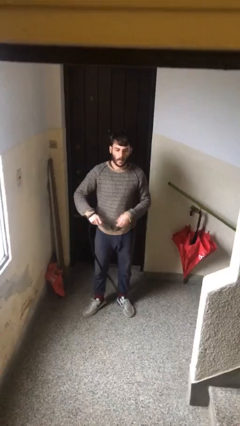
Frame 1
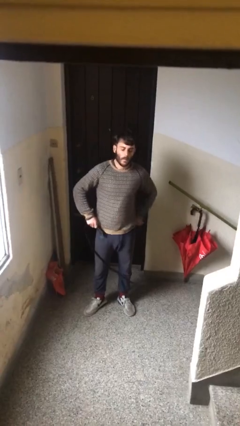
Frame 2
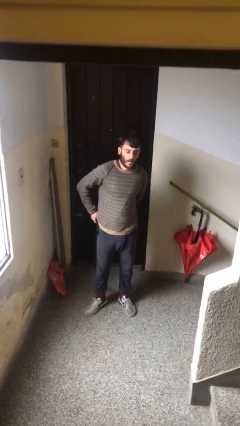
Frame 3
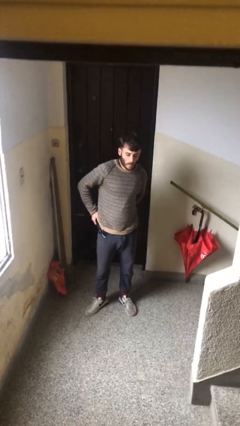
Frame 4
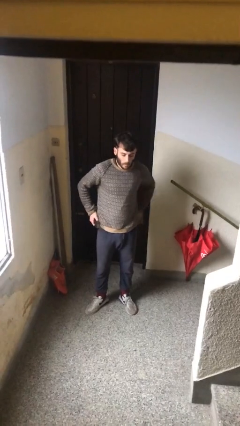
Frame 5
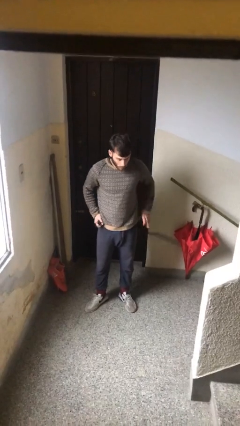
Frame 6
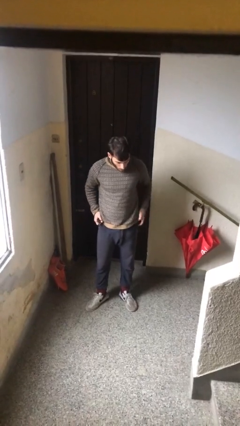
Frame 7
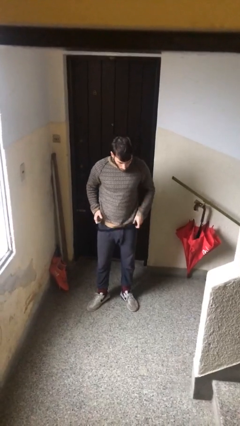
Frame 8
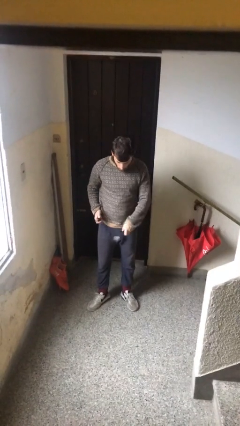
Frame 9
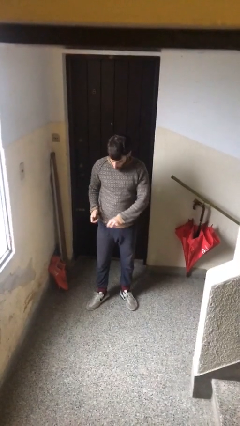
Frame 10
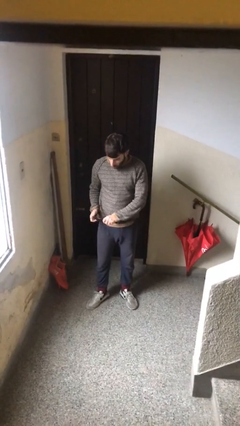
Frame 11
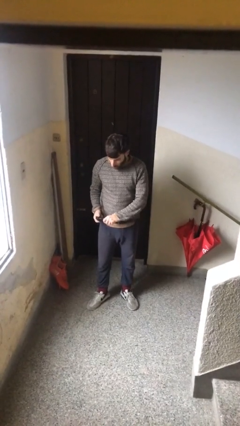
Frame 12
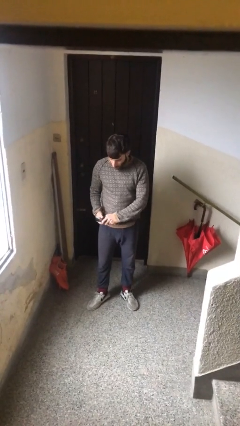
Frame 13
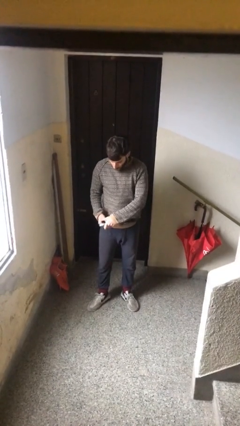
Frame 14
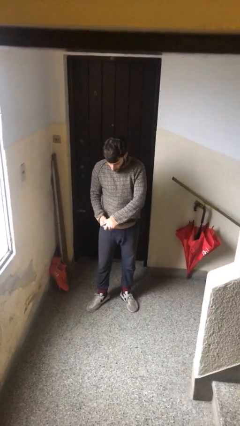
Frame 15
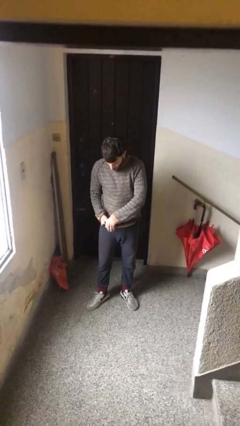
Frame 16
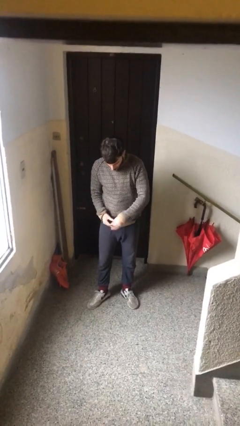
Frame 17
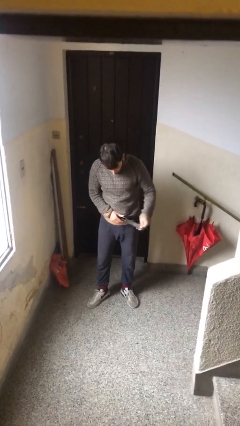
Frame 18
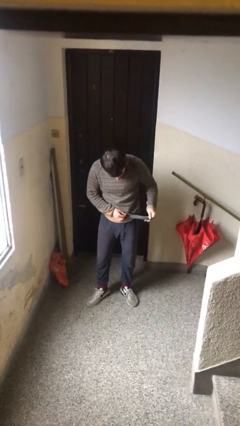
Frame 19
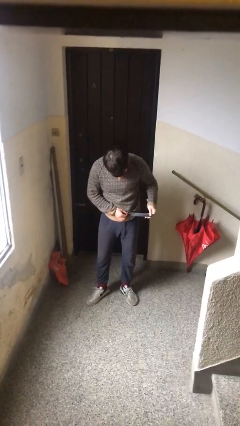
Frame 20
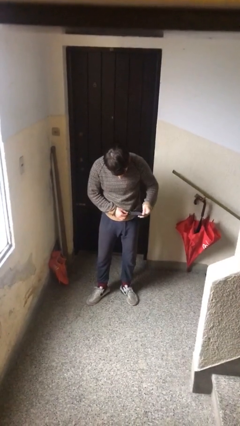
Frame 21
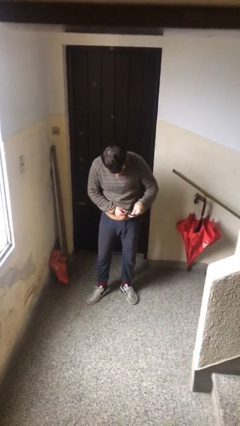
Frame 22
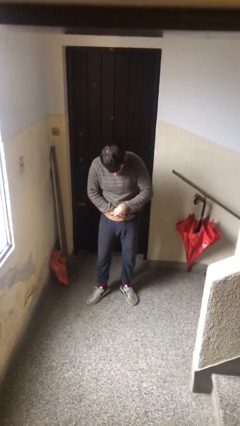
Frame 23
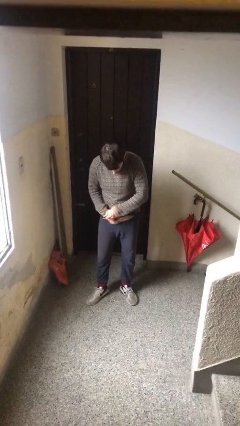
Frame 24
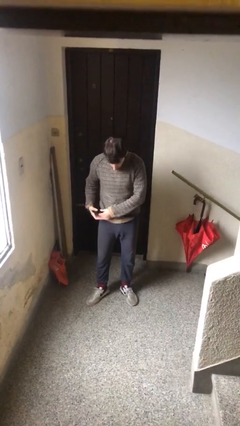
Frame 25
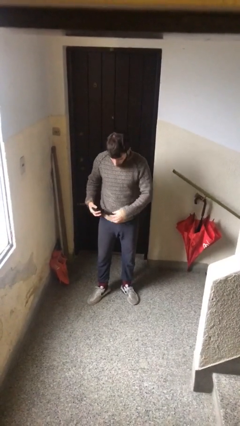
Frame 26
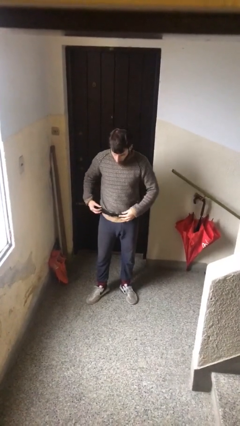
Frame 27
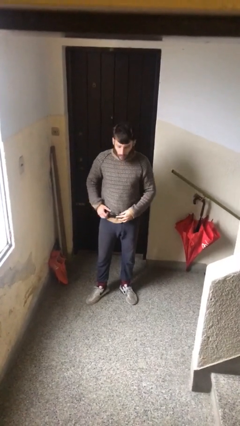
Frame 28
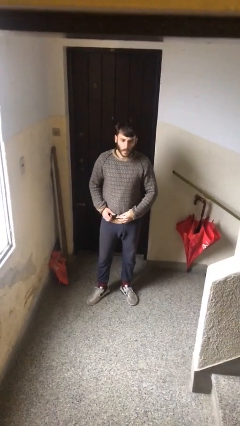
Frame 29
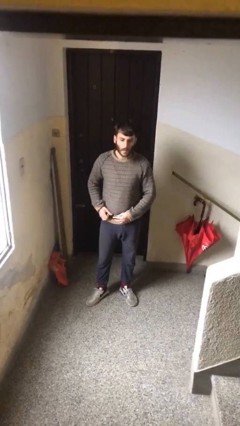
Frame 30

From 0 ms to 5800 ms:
person puts on belt

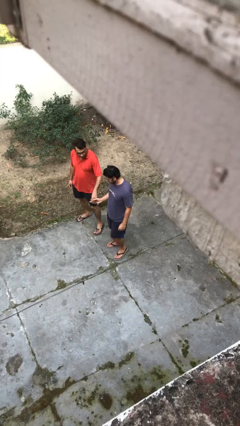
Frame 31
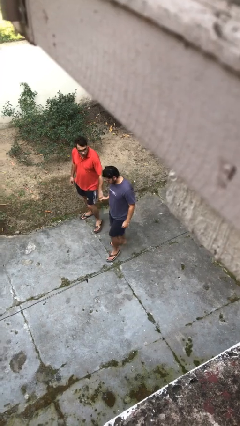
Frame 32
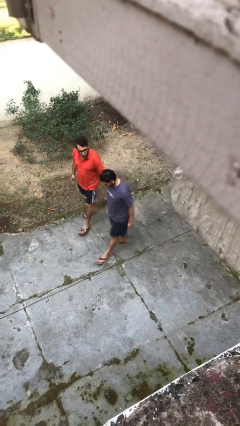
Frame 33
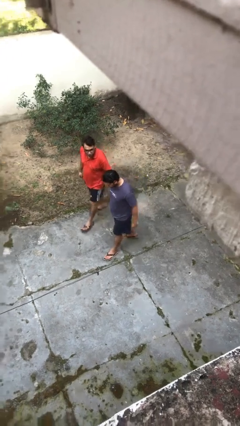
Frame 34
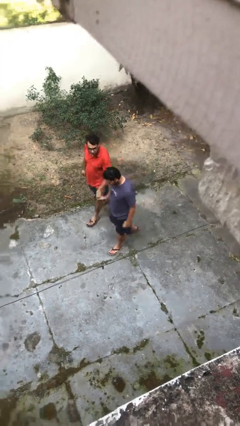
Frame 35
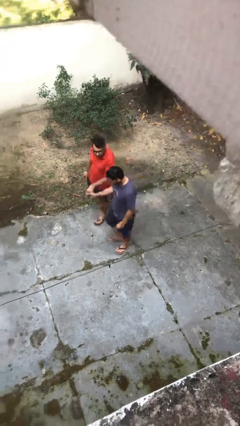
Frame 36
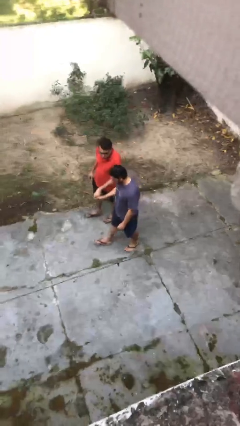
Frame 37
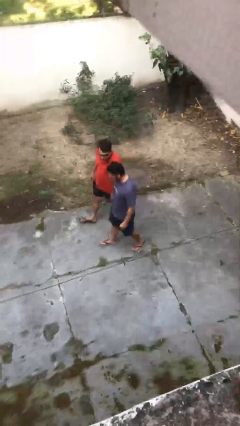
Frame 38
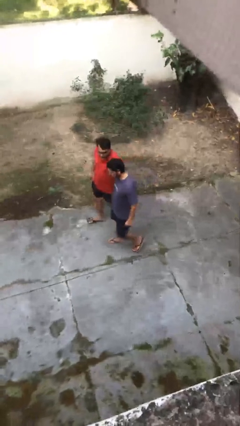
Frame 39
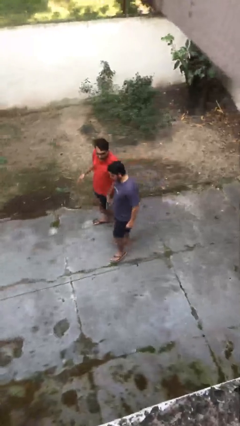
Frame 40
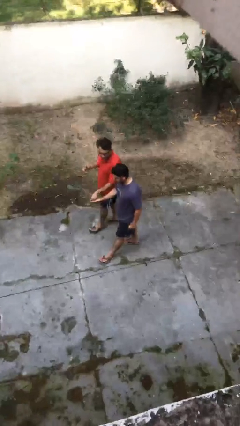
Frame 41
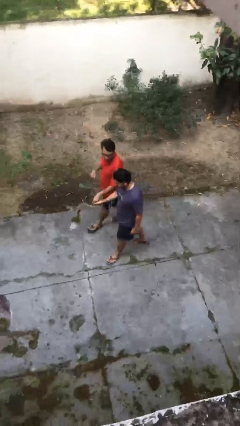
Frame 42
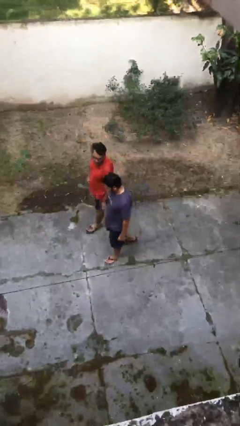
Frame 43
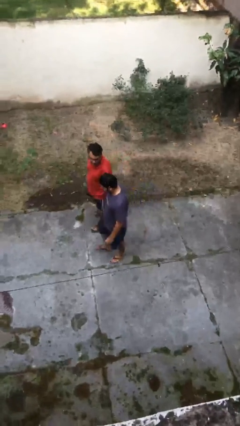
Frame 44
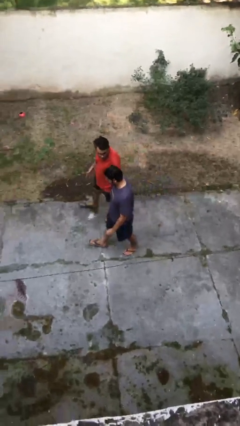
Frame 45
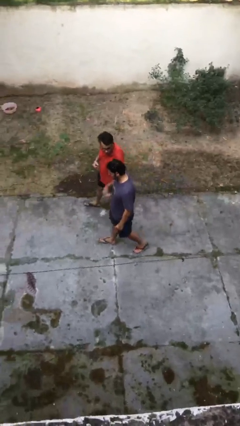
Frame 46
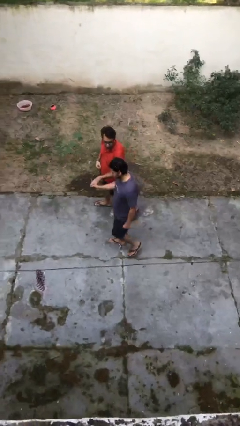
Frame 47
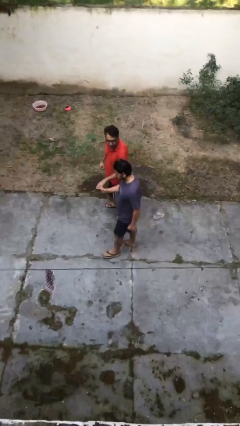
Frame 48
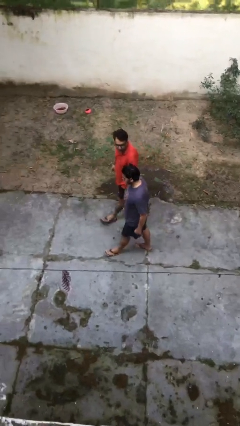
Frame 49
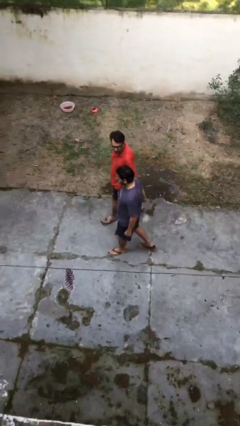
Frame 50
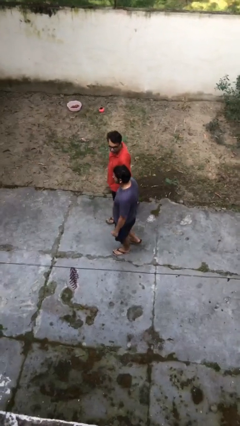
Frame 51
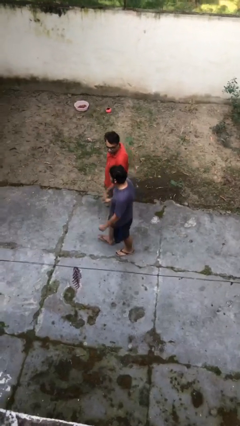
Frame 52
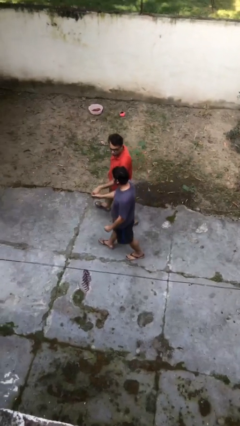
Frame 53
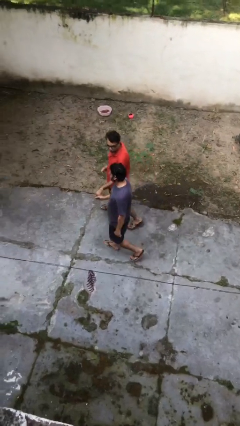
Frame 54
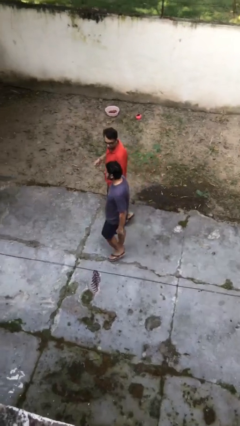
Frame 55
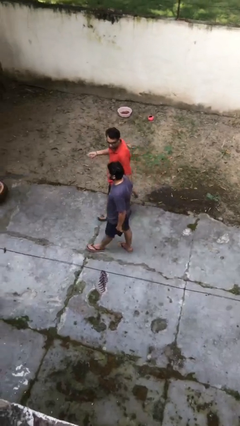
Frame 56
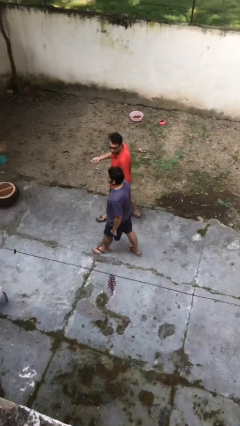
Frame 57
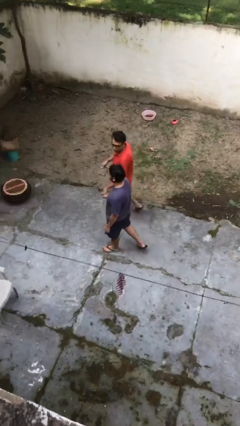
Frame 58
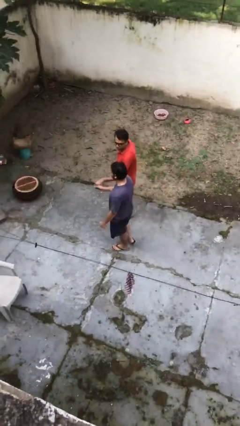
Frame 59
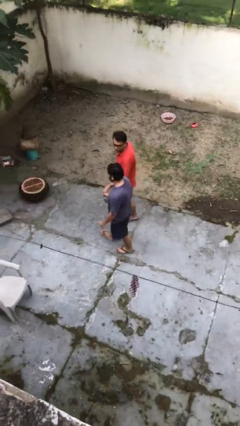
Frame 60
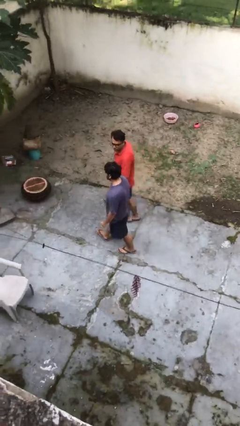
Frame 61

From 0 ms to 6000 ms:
person holds hand

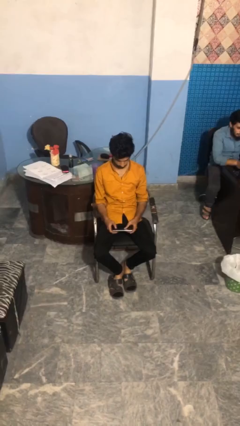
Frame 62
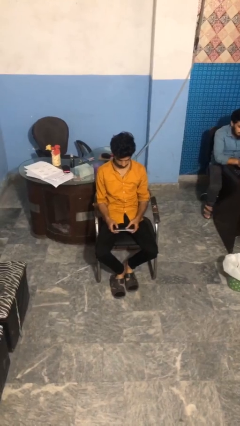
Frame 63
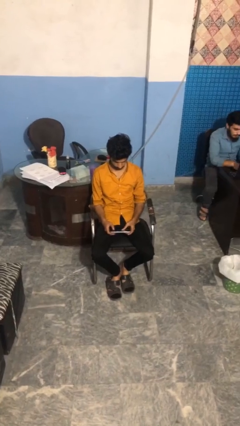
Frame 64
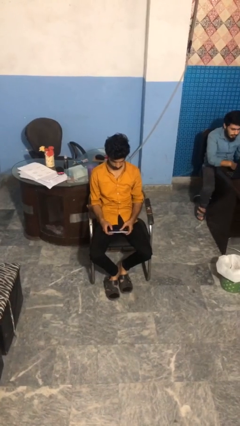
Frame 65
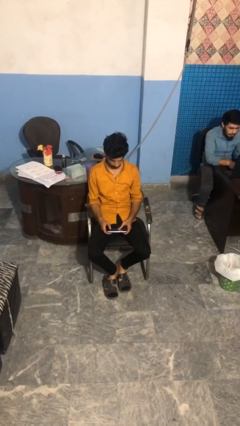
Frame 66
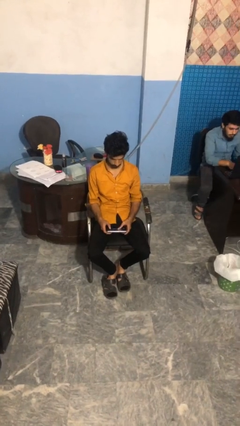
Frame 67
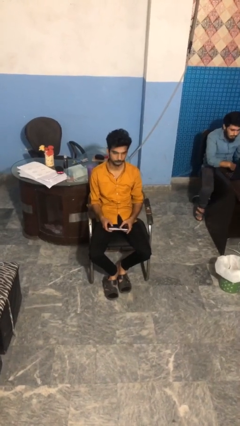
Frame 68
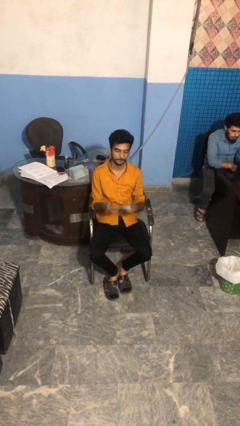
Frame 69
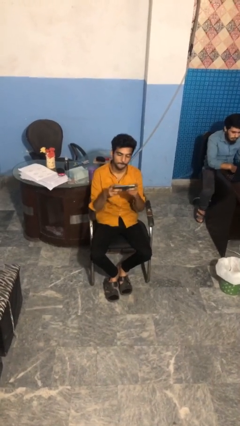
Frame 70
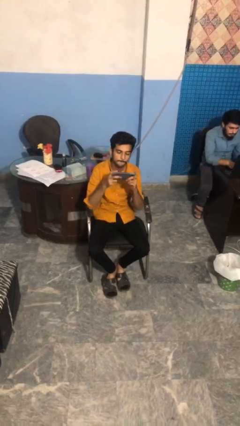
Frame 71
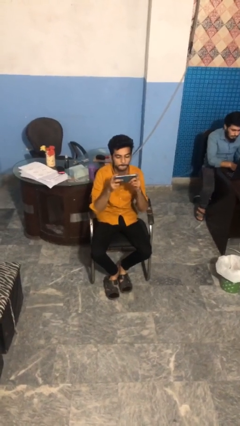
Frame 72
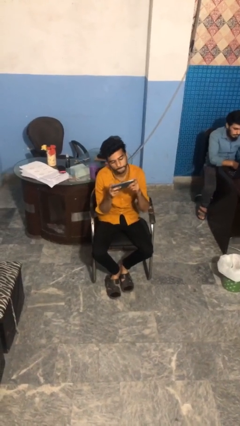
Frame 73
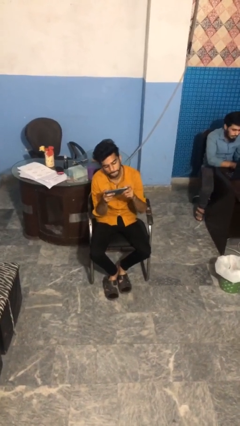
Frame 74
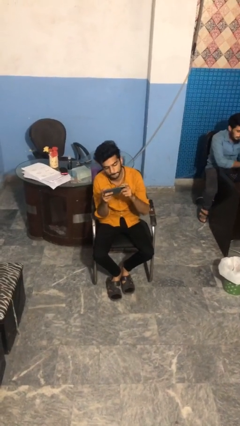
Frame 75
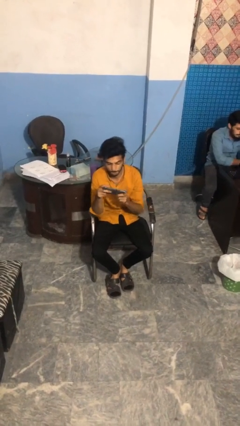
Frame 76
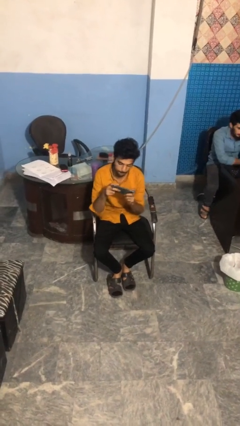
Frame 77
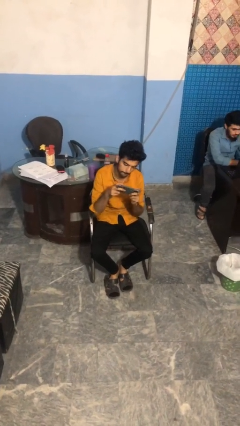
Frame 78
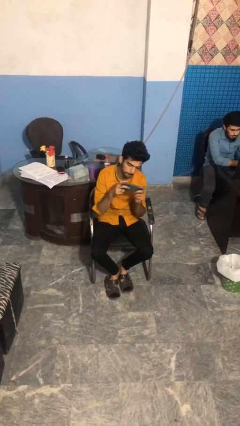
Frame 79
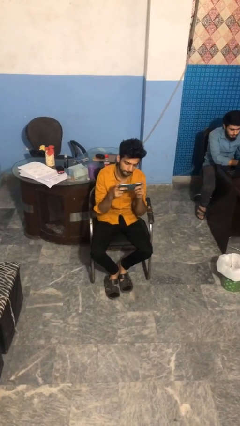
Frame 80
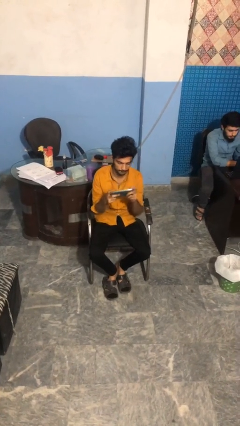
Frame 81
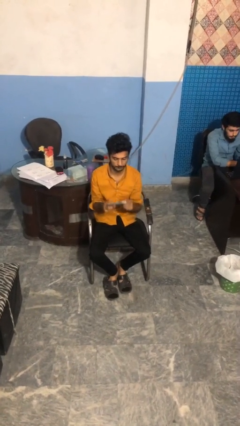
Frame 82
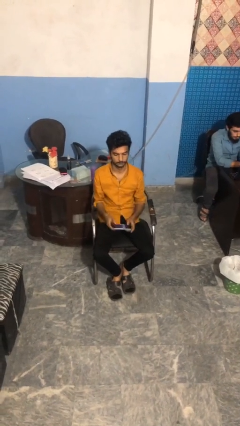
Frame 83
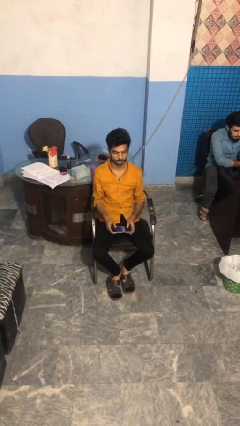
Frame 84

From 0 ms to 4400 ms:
person interacts with handheld game

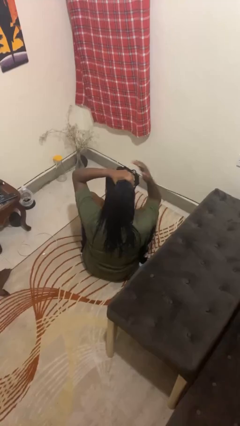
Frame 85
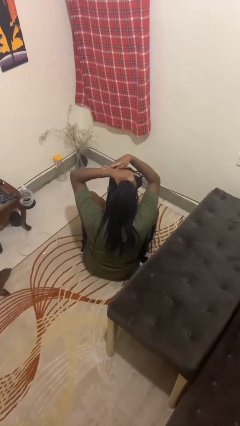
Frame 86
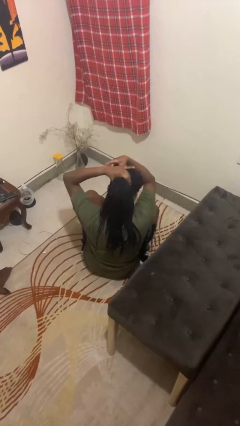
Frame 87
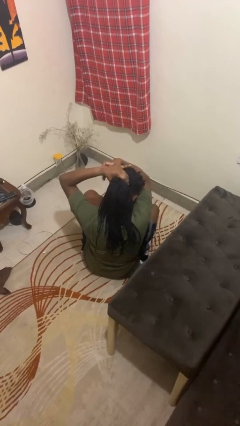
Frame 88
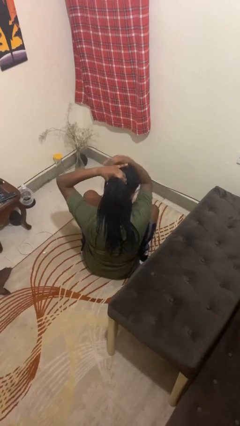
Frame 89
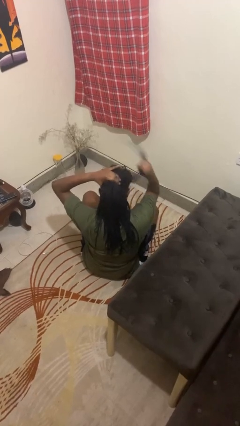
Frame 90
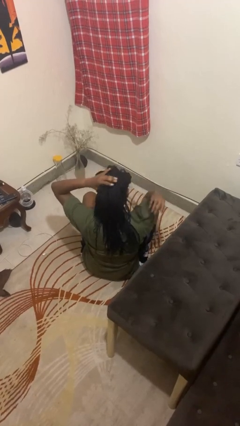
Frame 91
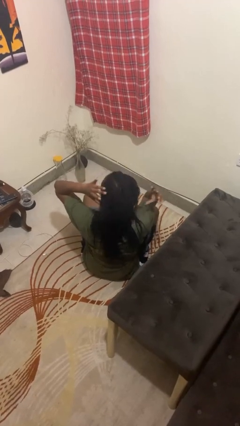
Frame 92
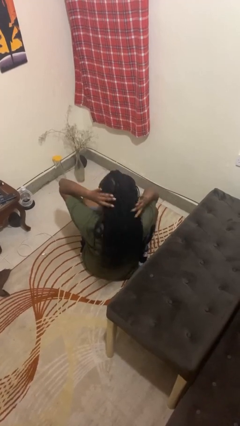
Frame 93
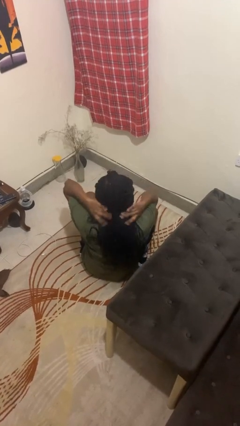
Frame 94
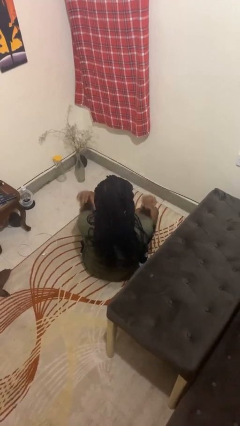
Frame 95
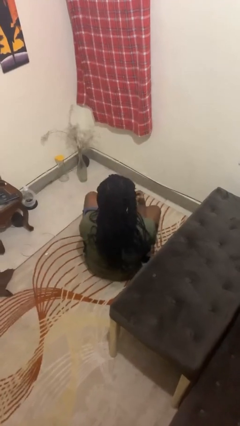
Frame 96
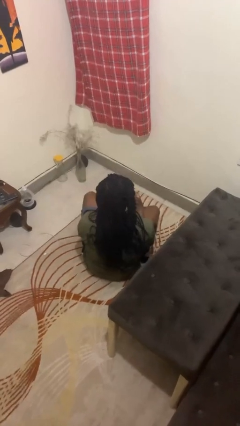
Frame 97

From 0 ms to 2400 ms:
person takes off hairtie
